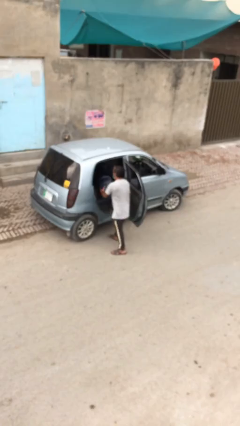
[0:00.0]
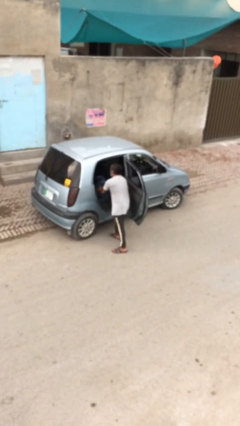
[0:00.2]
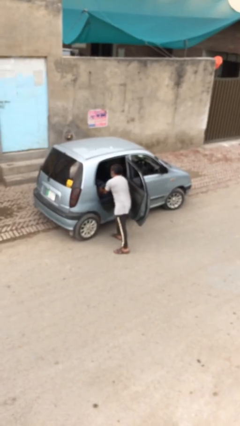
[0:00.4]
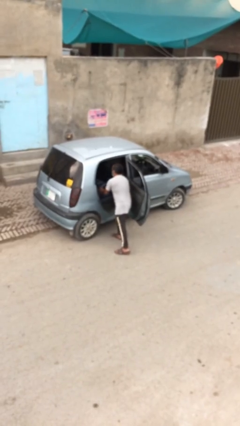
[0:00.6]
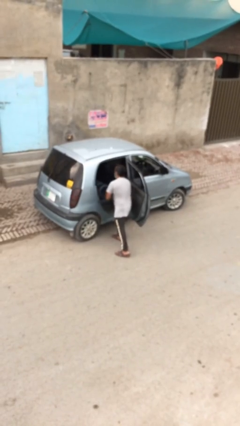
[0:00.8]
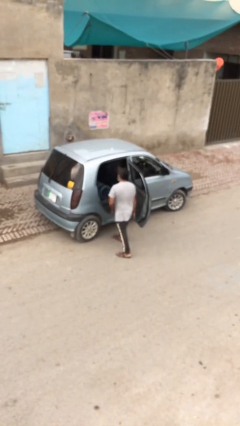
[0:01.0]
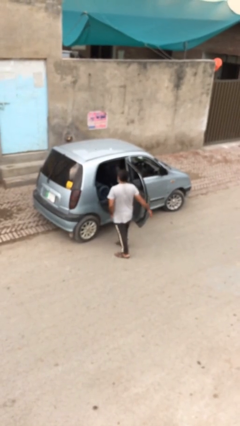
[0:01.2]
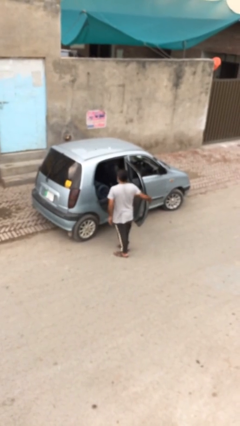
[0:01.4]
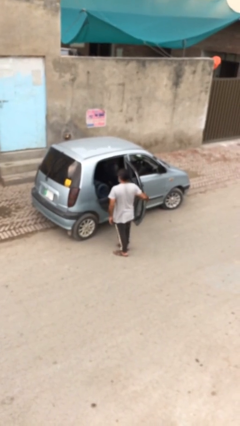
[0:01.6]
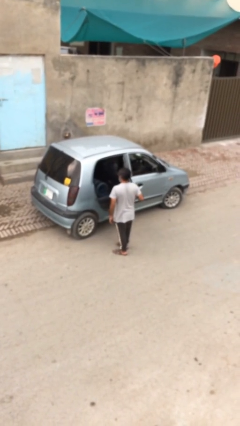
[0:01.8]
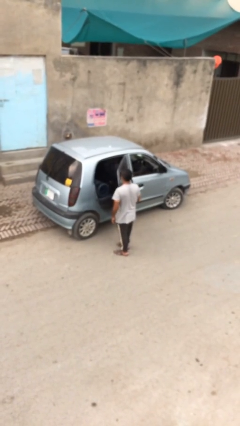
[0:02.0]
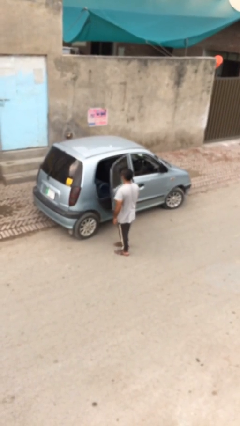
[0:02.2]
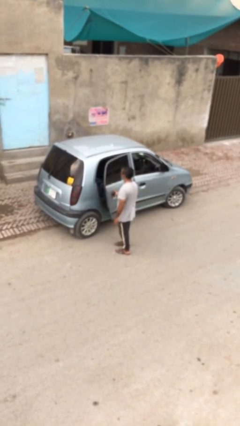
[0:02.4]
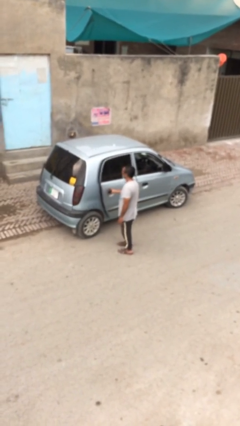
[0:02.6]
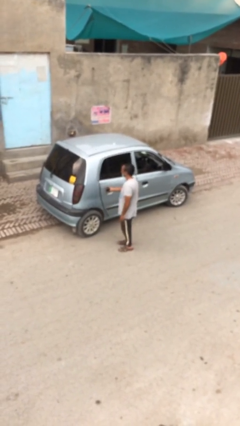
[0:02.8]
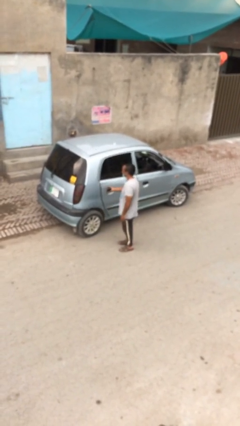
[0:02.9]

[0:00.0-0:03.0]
person closes car door

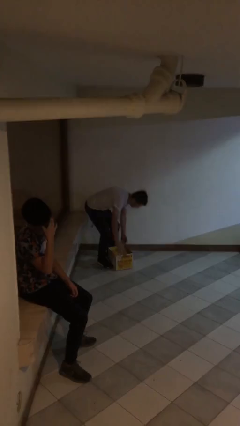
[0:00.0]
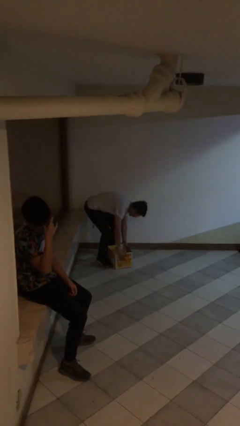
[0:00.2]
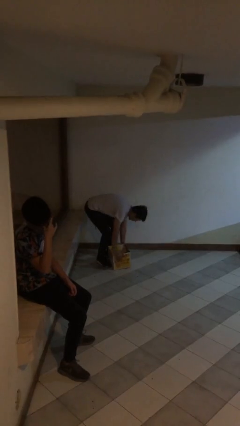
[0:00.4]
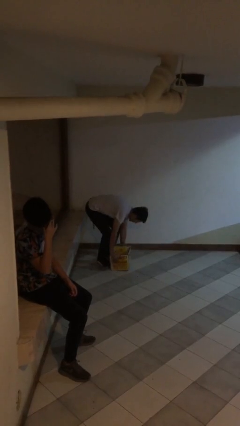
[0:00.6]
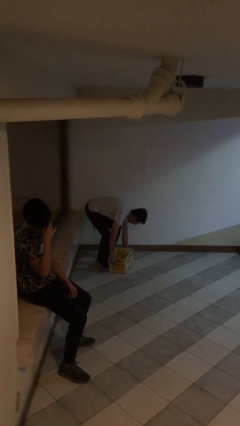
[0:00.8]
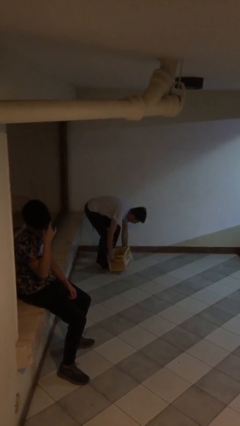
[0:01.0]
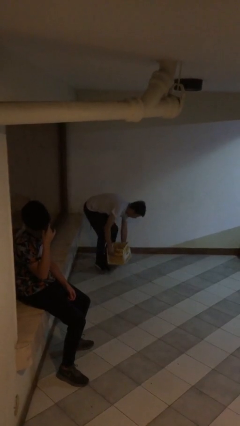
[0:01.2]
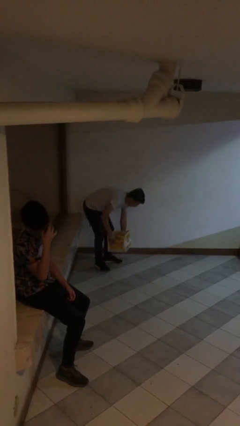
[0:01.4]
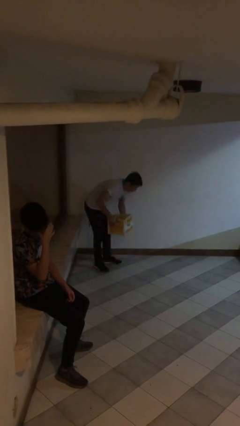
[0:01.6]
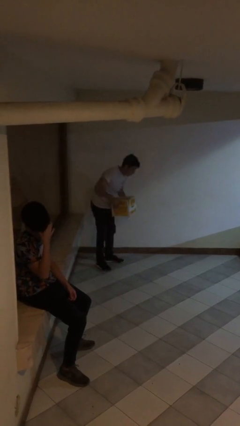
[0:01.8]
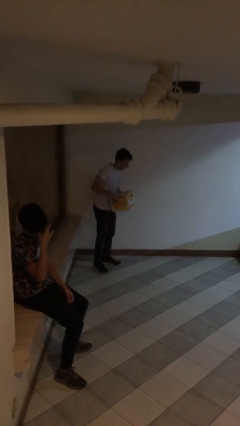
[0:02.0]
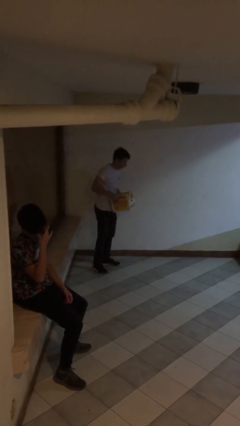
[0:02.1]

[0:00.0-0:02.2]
person picks up object from floor

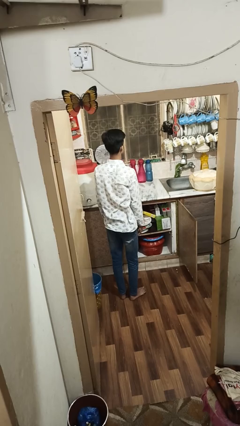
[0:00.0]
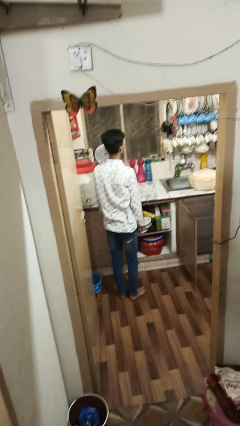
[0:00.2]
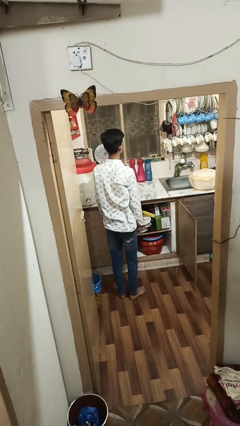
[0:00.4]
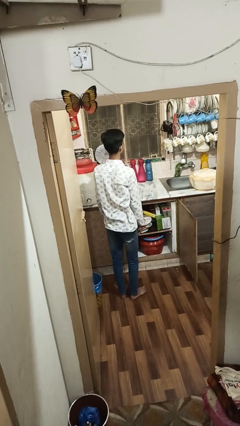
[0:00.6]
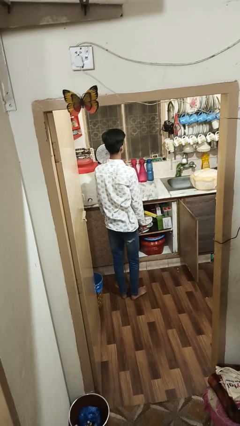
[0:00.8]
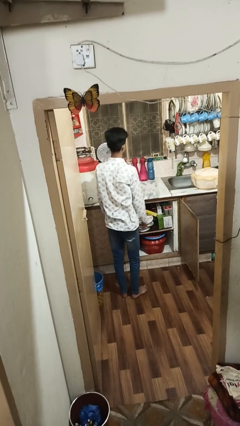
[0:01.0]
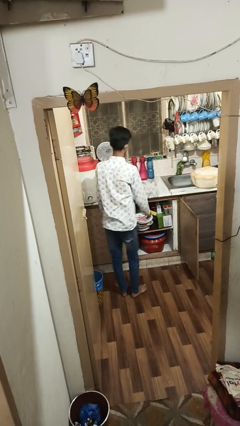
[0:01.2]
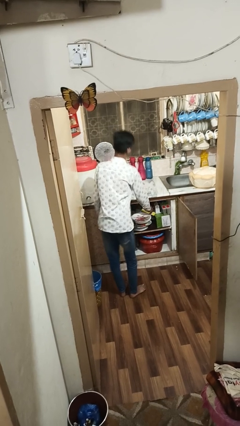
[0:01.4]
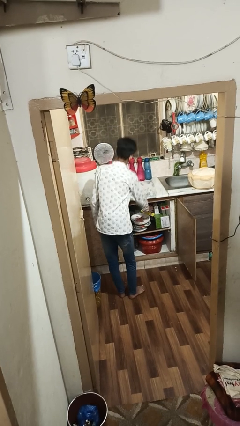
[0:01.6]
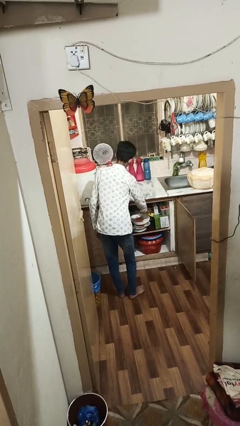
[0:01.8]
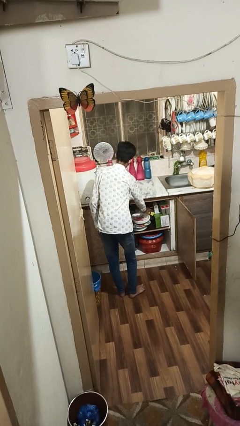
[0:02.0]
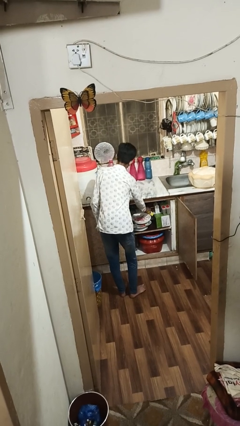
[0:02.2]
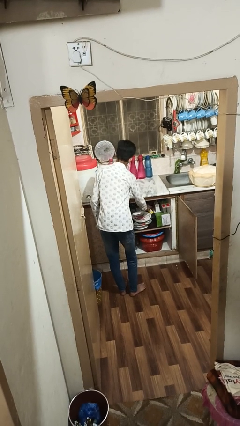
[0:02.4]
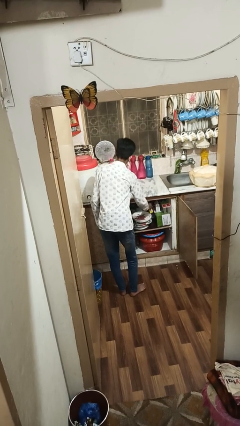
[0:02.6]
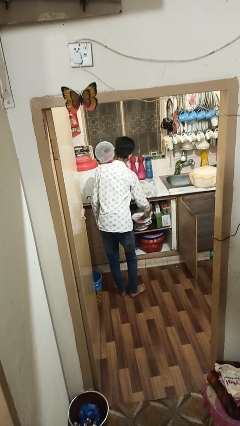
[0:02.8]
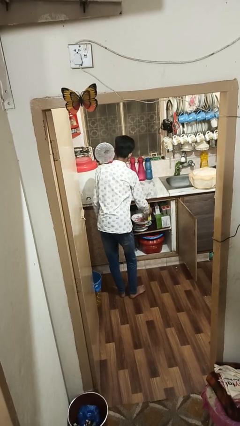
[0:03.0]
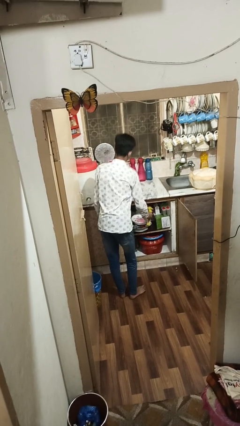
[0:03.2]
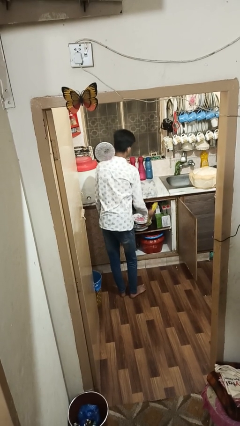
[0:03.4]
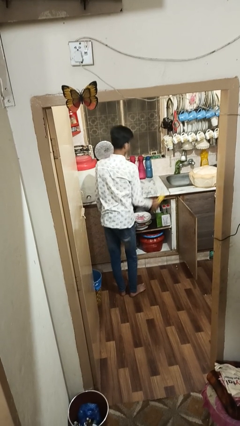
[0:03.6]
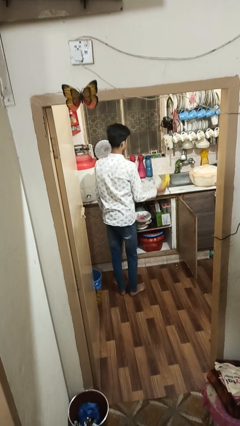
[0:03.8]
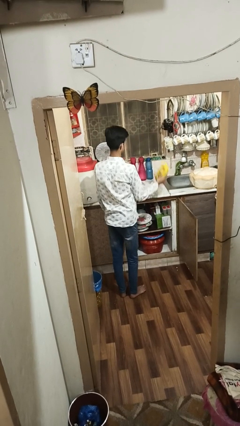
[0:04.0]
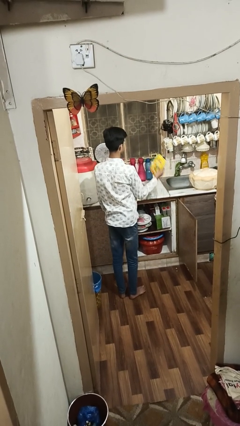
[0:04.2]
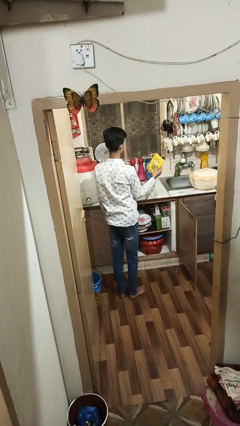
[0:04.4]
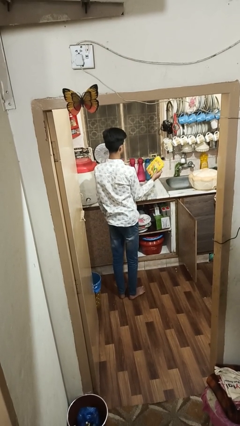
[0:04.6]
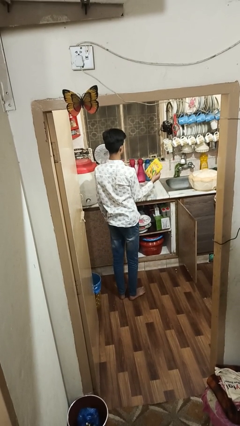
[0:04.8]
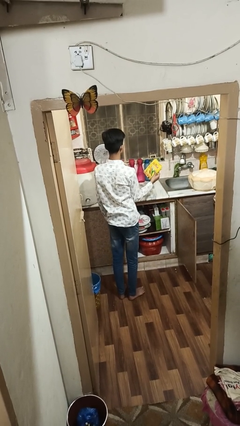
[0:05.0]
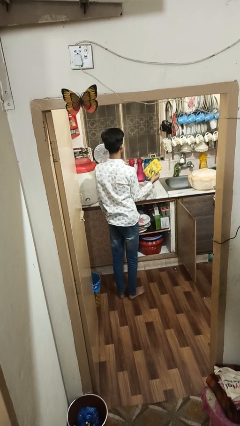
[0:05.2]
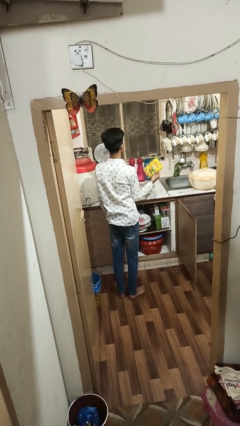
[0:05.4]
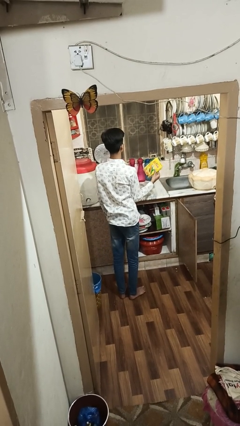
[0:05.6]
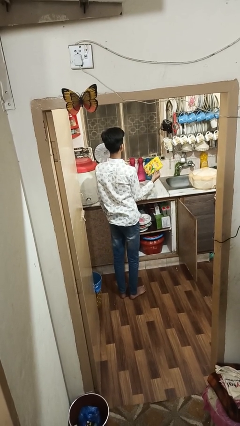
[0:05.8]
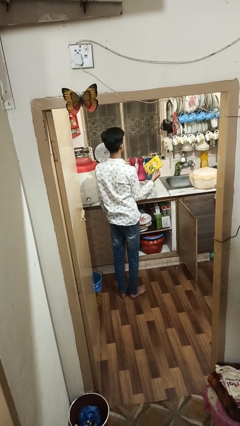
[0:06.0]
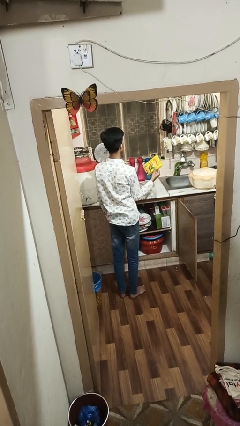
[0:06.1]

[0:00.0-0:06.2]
person takes object from cabinet

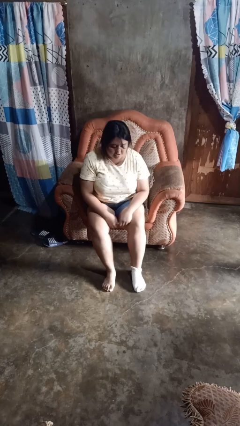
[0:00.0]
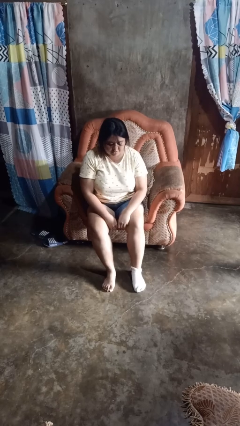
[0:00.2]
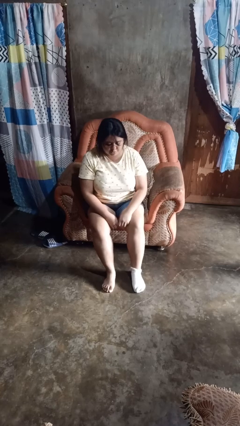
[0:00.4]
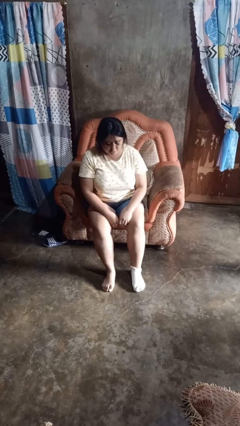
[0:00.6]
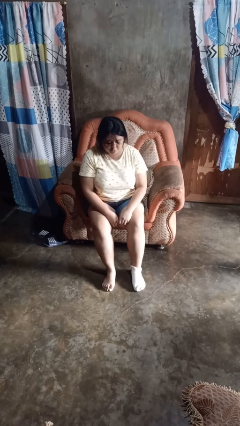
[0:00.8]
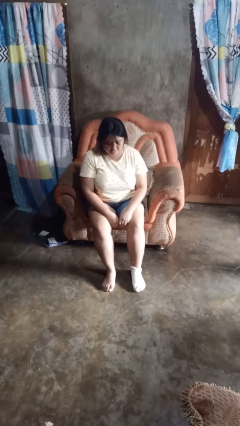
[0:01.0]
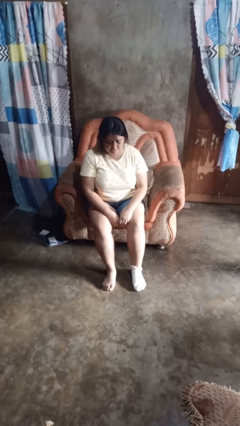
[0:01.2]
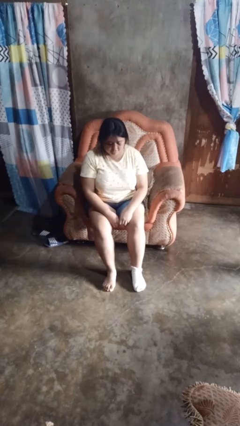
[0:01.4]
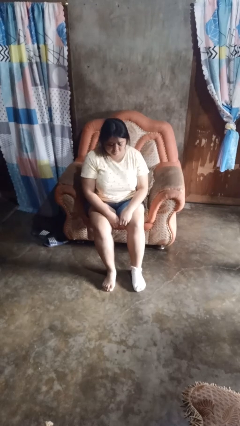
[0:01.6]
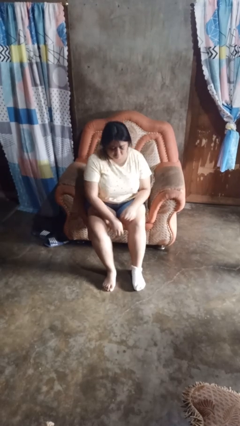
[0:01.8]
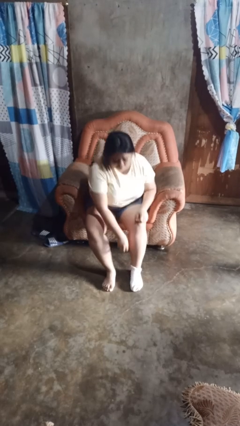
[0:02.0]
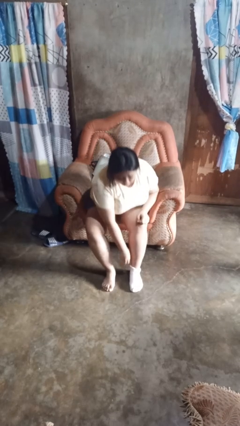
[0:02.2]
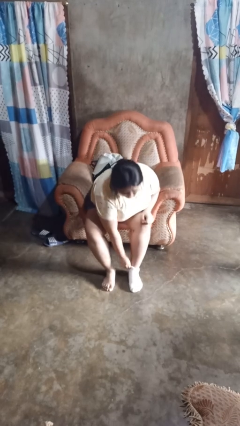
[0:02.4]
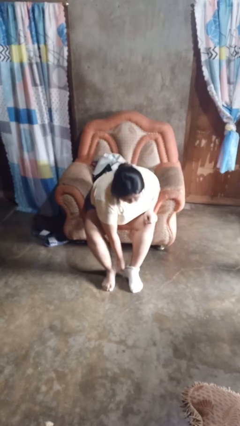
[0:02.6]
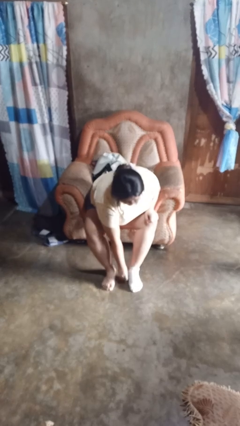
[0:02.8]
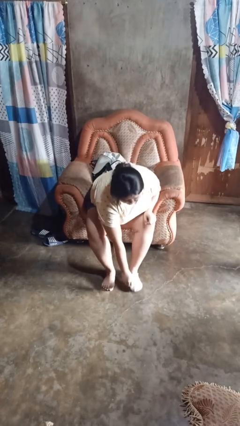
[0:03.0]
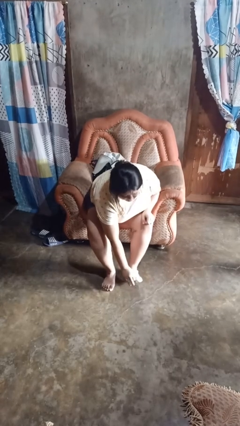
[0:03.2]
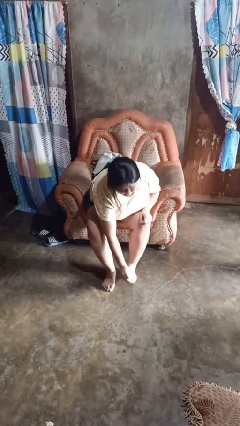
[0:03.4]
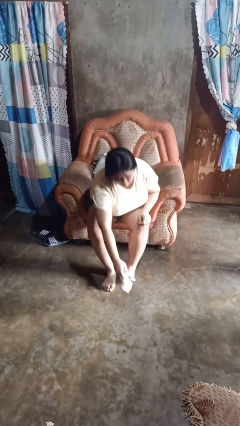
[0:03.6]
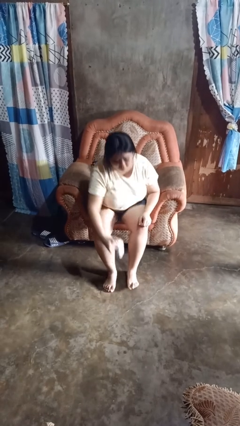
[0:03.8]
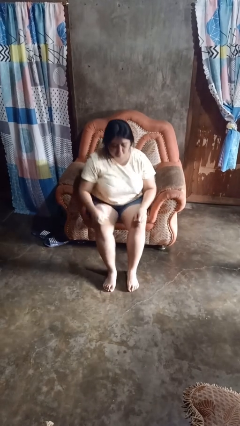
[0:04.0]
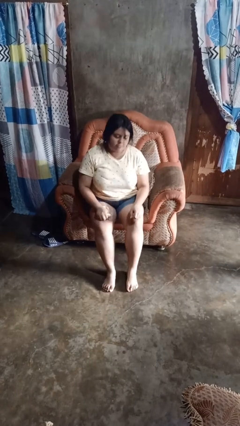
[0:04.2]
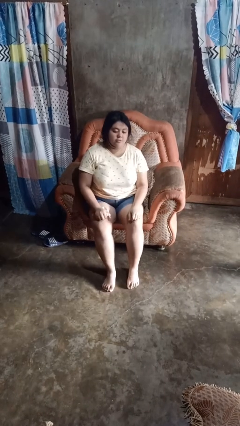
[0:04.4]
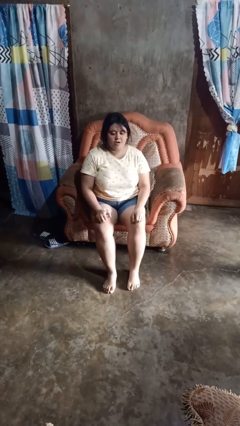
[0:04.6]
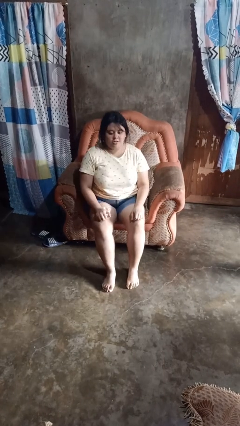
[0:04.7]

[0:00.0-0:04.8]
person takes off socks

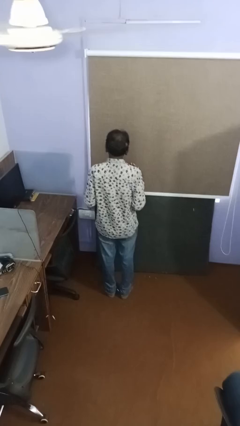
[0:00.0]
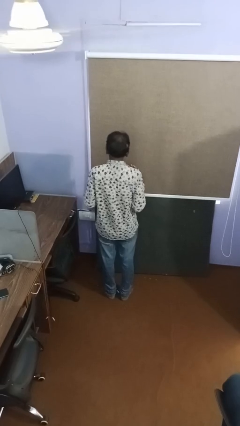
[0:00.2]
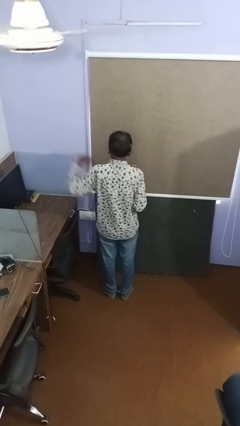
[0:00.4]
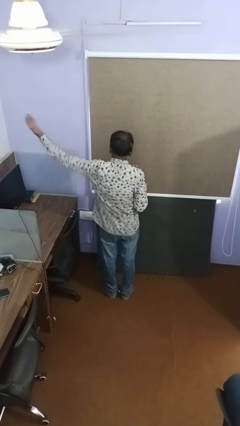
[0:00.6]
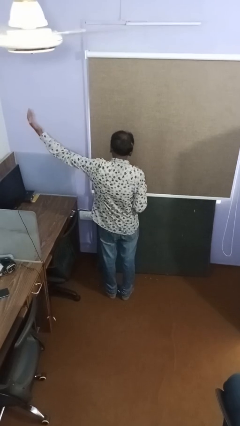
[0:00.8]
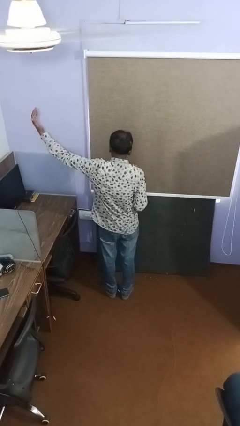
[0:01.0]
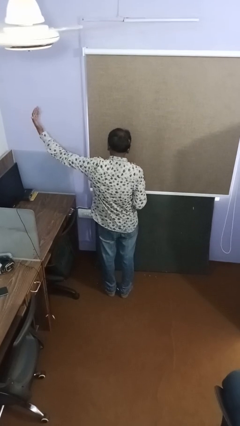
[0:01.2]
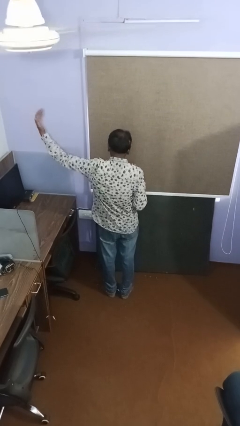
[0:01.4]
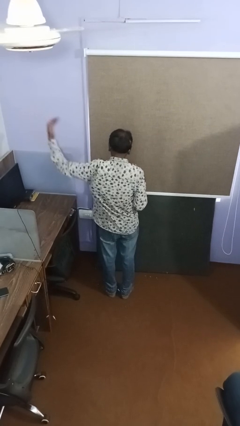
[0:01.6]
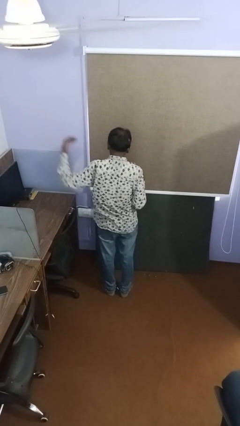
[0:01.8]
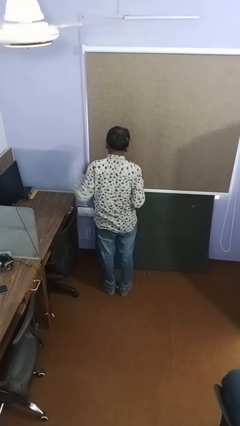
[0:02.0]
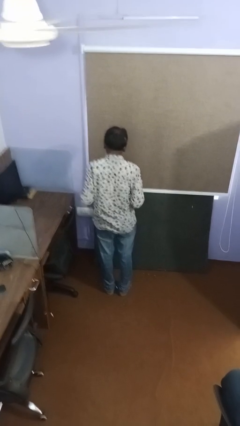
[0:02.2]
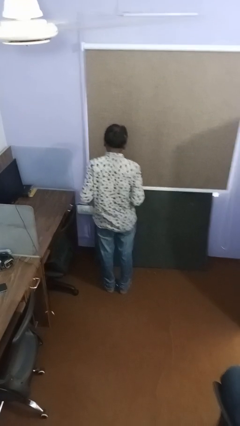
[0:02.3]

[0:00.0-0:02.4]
person gestures swipe left
